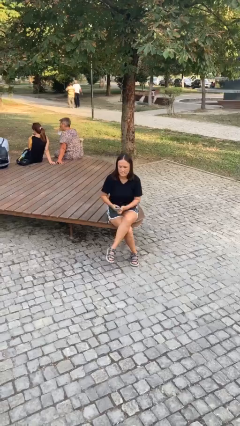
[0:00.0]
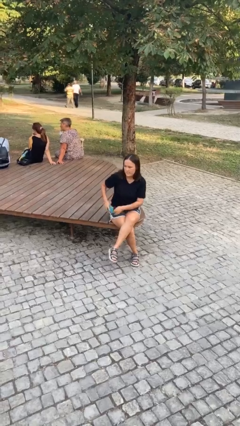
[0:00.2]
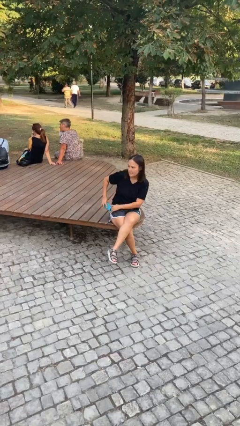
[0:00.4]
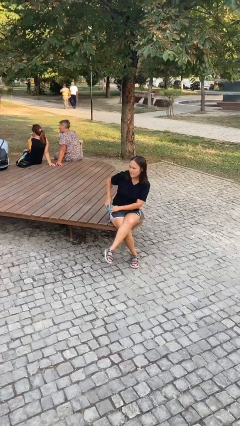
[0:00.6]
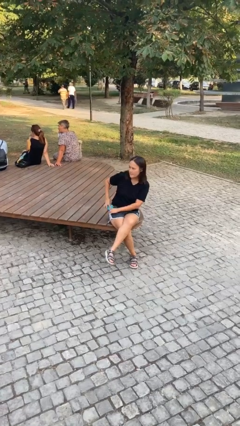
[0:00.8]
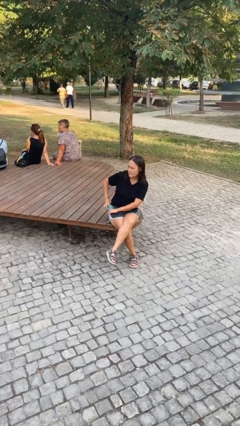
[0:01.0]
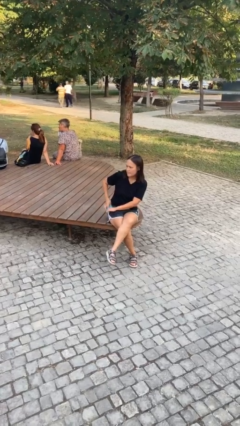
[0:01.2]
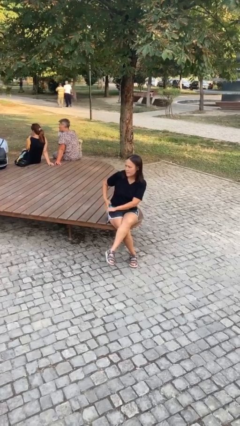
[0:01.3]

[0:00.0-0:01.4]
person puts phone into pocket

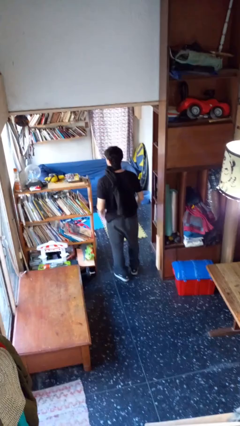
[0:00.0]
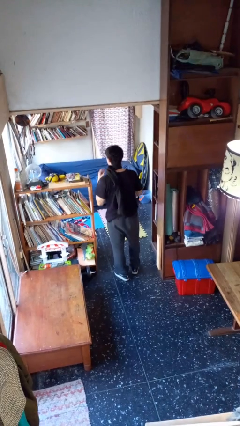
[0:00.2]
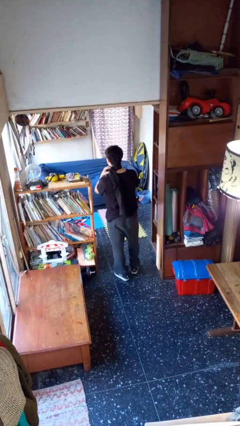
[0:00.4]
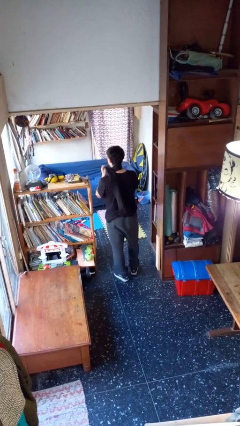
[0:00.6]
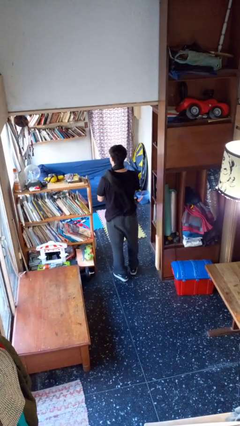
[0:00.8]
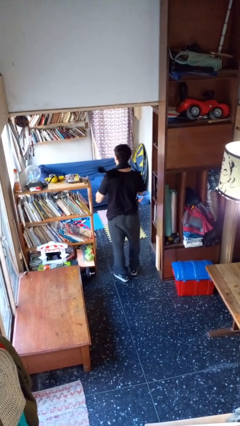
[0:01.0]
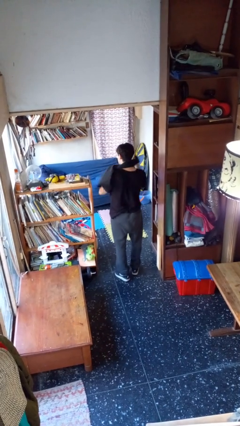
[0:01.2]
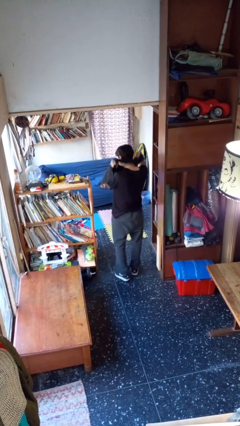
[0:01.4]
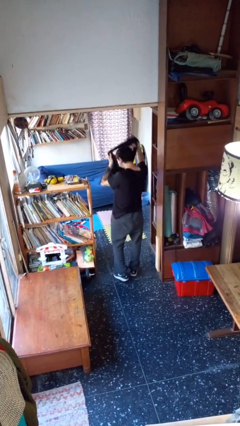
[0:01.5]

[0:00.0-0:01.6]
person takes off scarf

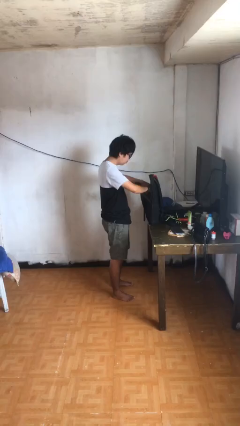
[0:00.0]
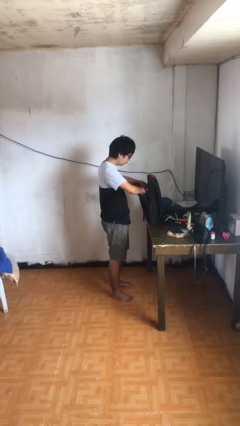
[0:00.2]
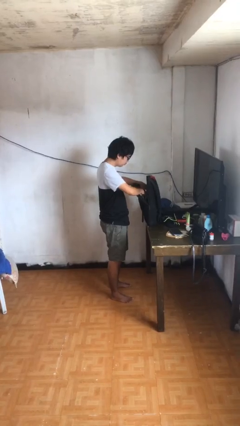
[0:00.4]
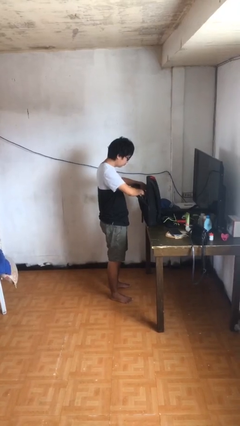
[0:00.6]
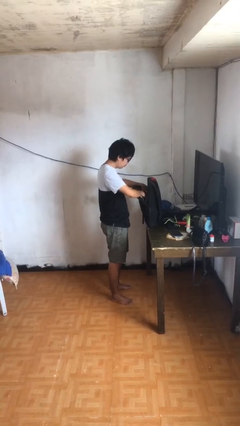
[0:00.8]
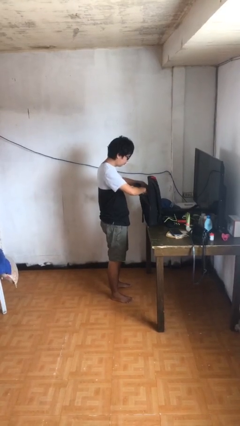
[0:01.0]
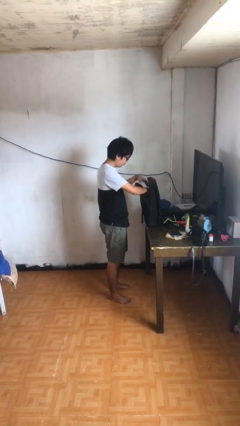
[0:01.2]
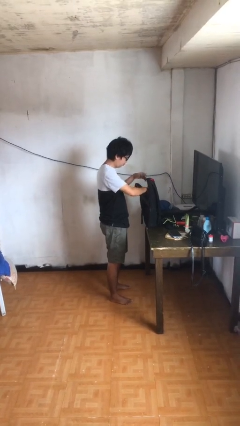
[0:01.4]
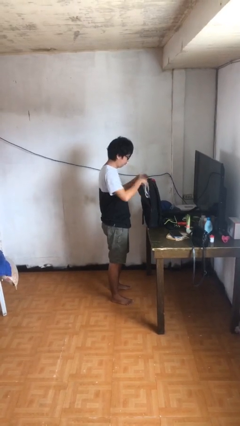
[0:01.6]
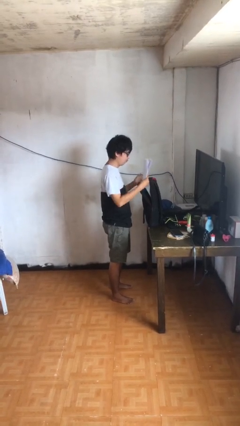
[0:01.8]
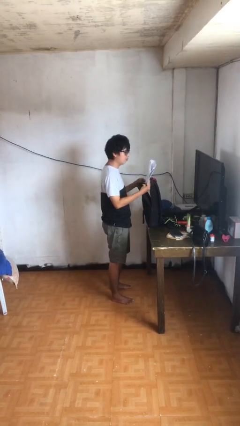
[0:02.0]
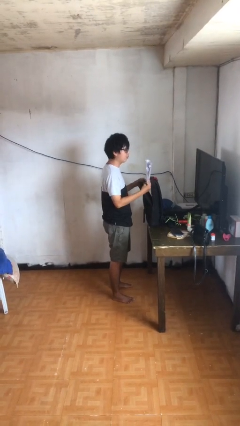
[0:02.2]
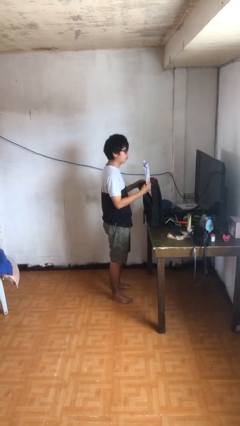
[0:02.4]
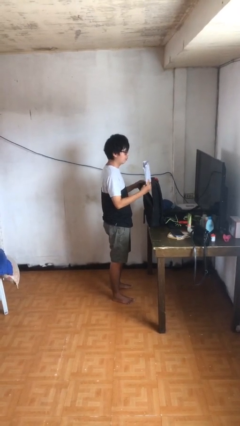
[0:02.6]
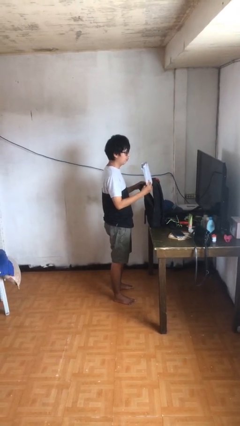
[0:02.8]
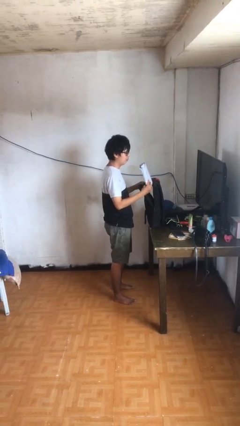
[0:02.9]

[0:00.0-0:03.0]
person takes object from backpack

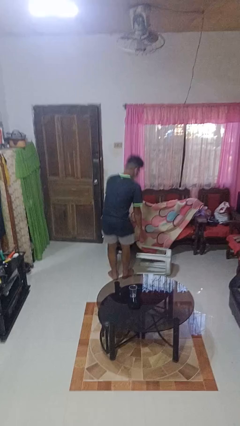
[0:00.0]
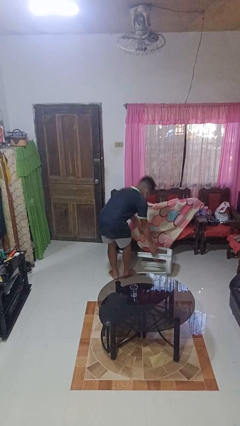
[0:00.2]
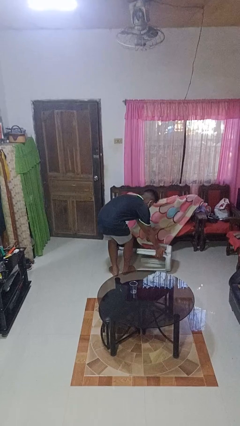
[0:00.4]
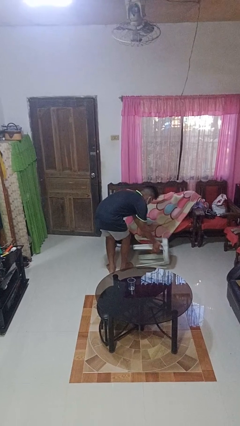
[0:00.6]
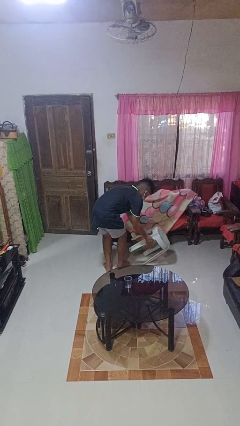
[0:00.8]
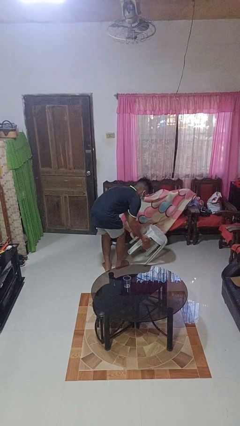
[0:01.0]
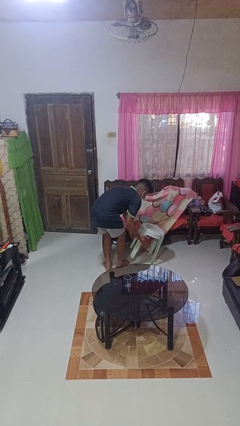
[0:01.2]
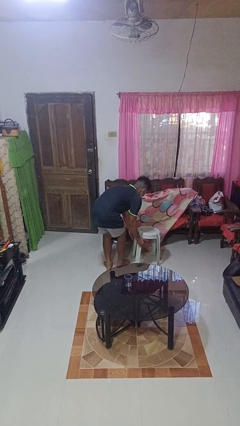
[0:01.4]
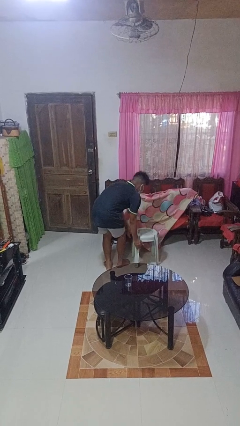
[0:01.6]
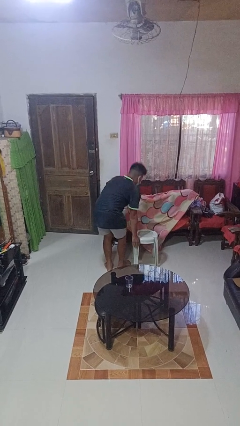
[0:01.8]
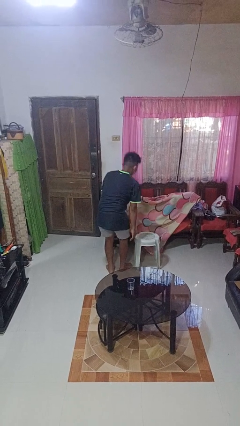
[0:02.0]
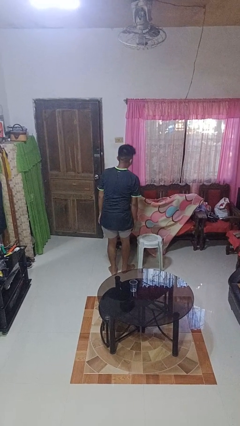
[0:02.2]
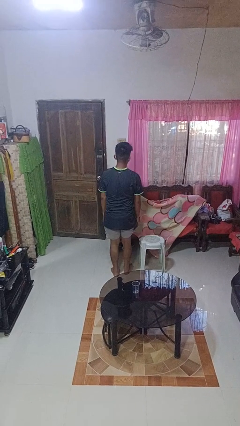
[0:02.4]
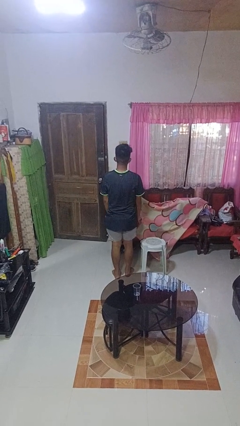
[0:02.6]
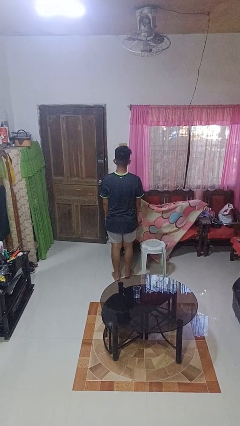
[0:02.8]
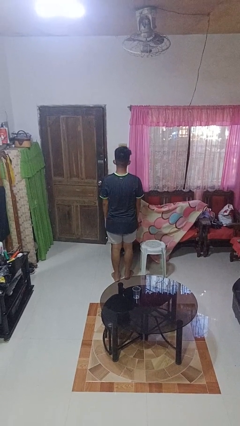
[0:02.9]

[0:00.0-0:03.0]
person sets upright furniture

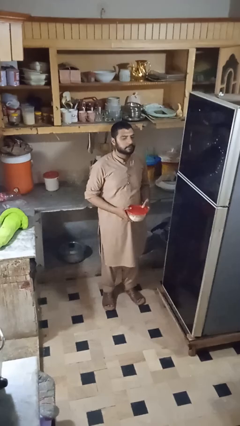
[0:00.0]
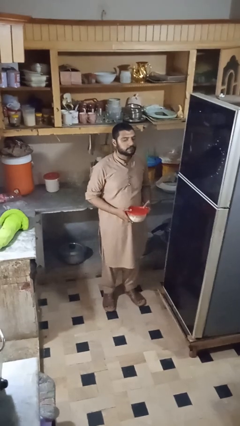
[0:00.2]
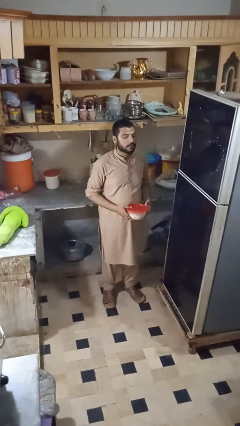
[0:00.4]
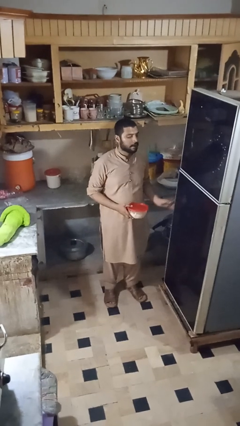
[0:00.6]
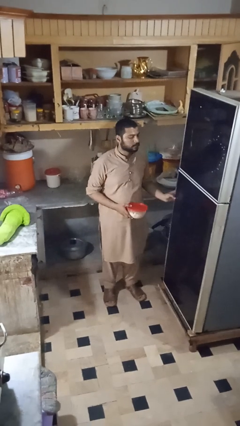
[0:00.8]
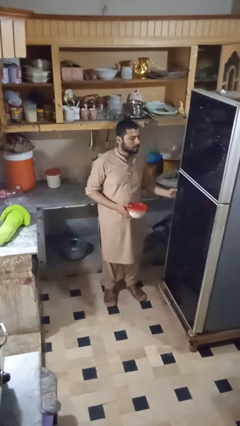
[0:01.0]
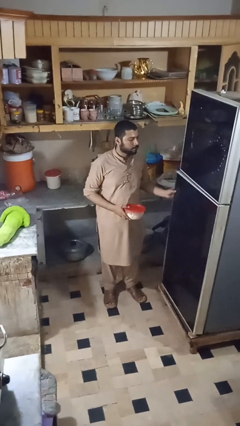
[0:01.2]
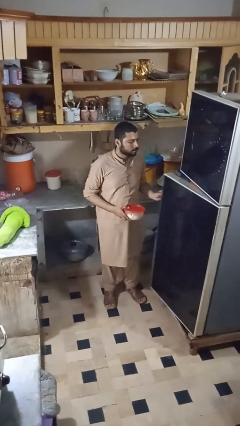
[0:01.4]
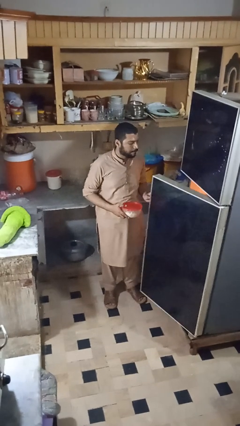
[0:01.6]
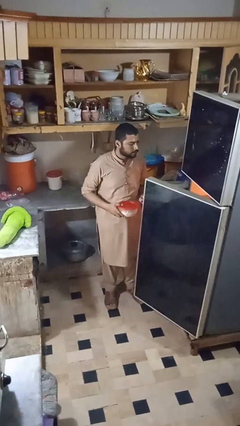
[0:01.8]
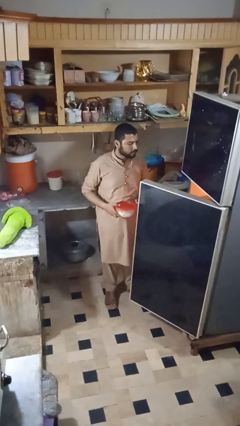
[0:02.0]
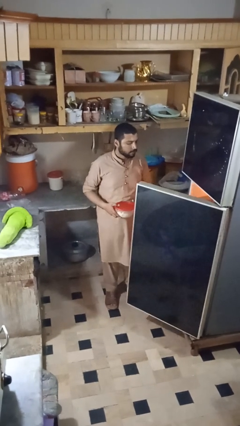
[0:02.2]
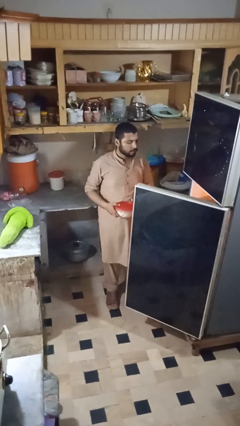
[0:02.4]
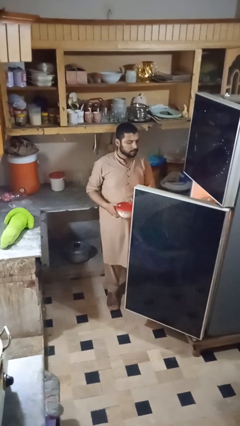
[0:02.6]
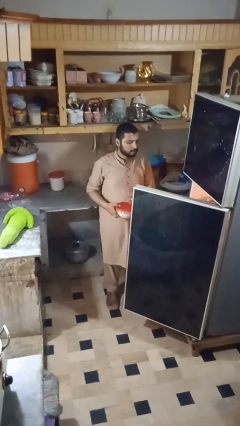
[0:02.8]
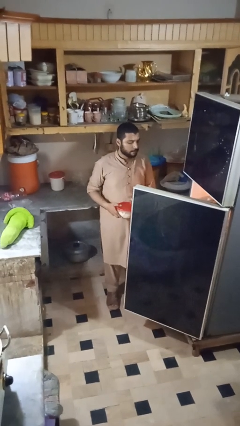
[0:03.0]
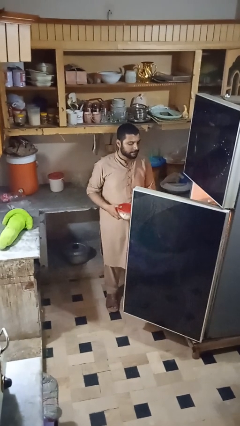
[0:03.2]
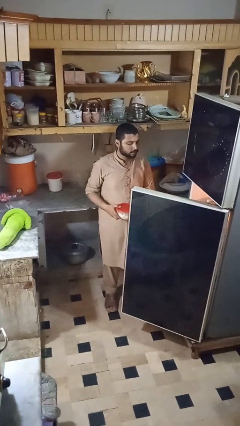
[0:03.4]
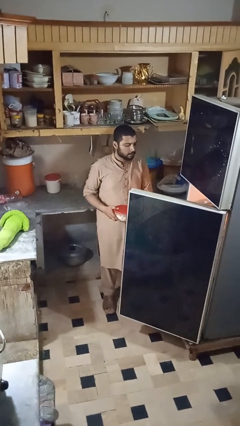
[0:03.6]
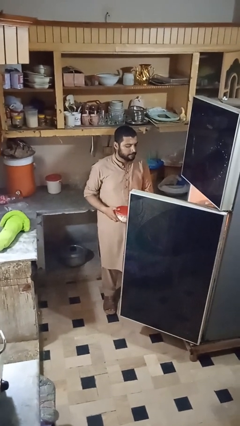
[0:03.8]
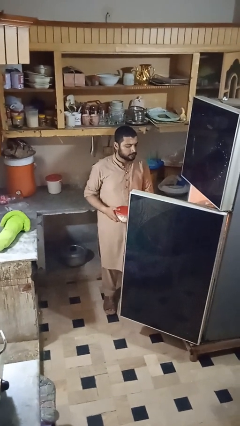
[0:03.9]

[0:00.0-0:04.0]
person opens refrigerator

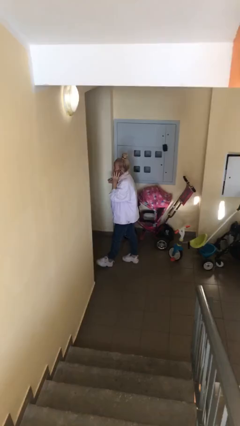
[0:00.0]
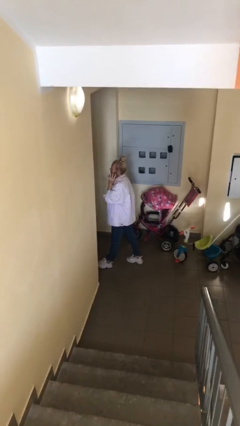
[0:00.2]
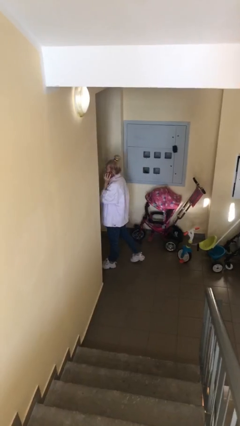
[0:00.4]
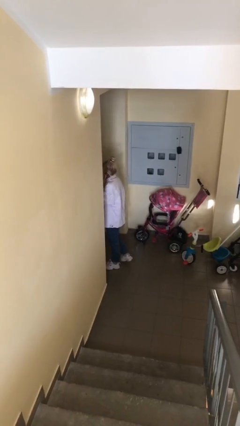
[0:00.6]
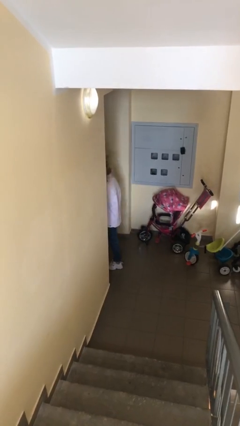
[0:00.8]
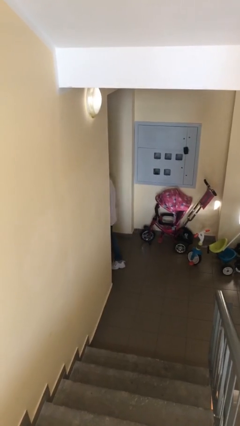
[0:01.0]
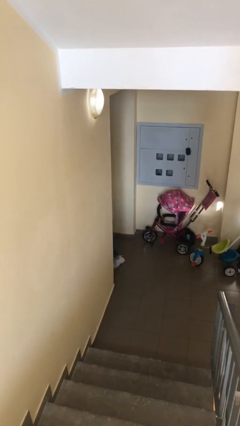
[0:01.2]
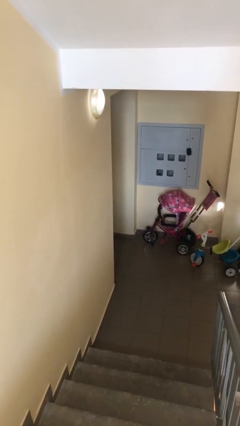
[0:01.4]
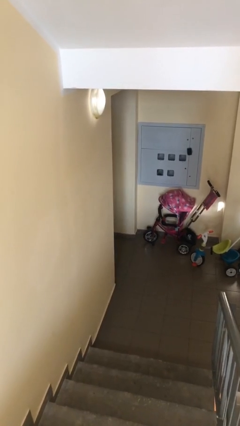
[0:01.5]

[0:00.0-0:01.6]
person exits scene through structure

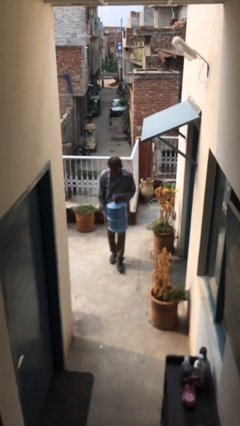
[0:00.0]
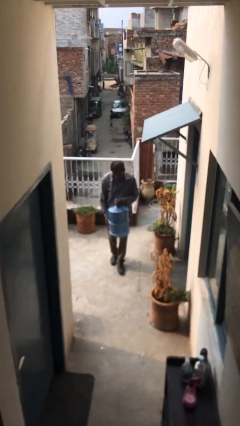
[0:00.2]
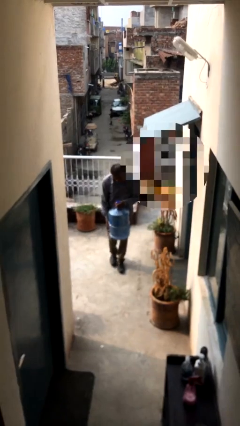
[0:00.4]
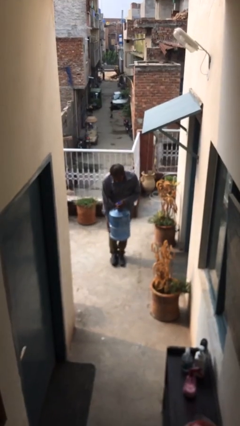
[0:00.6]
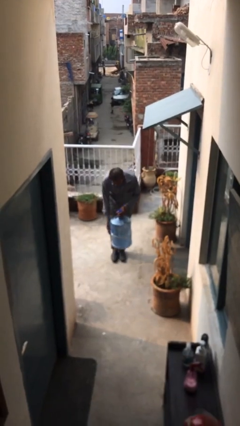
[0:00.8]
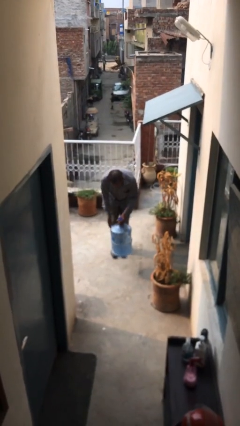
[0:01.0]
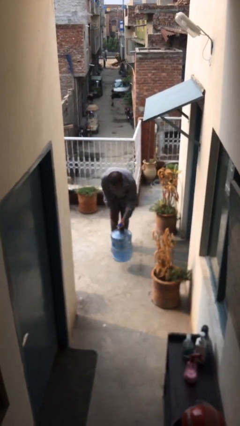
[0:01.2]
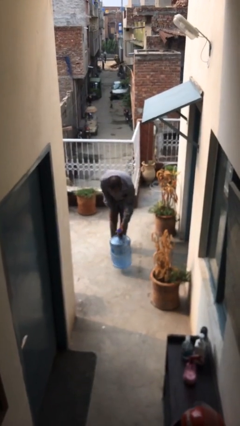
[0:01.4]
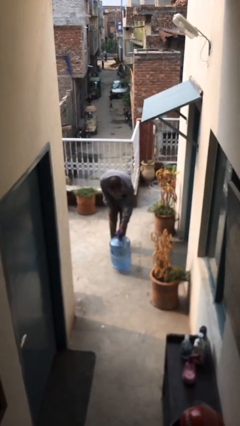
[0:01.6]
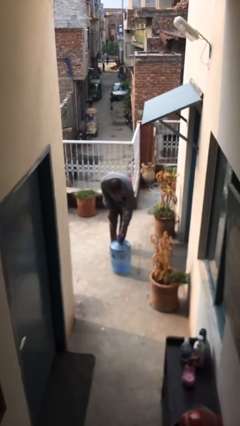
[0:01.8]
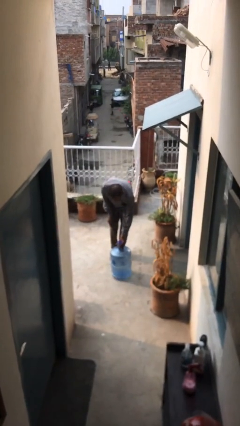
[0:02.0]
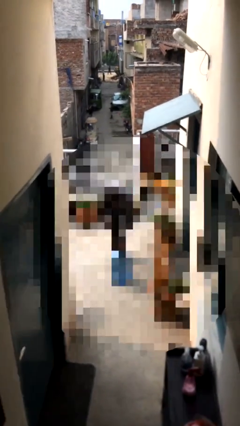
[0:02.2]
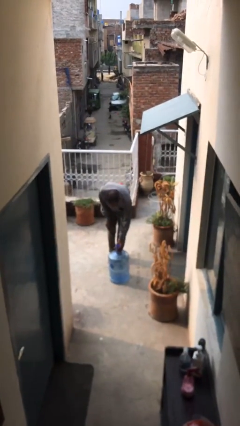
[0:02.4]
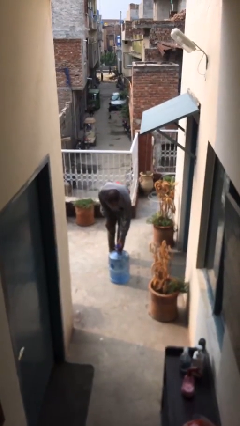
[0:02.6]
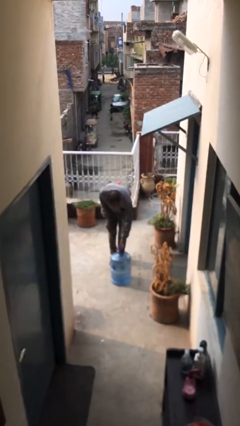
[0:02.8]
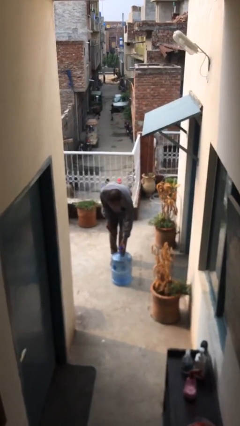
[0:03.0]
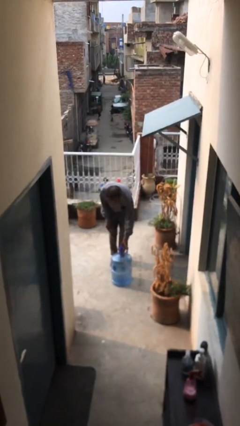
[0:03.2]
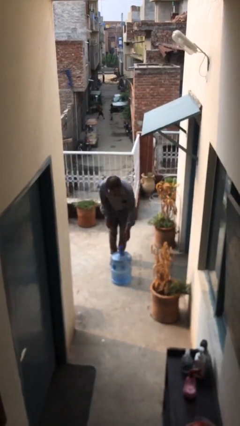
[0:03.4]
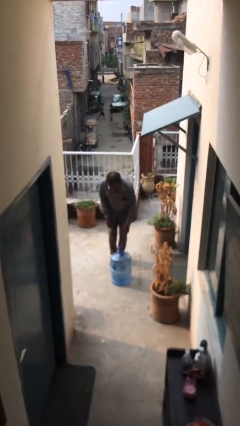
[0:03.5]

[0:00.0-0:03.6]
person puts down object on floor
